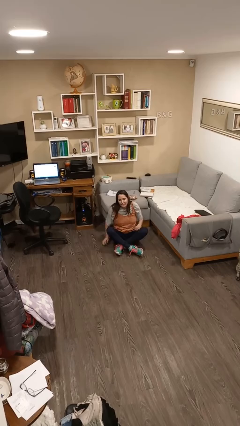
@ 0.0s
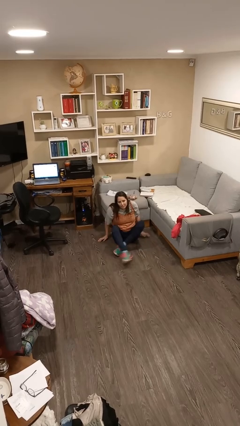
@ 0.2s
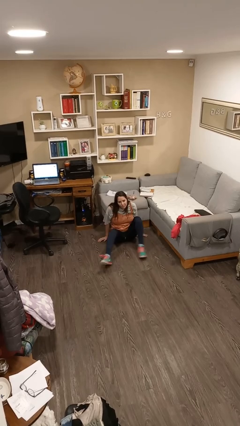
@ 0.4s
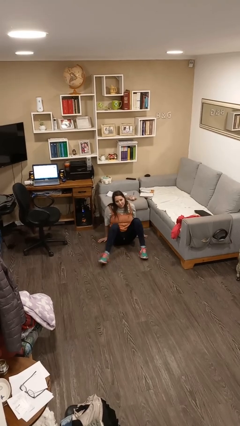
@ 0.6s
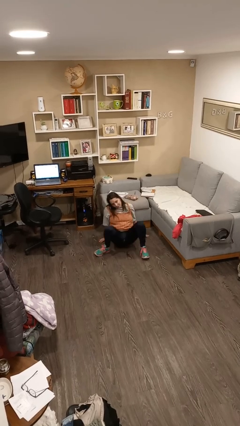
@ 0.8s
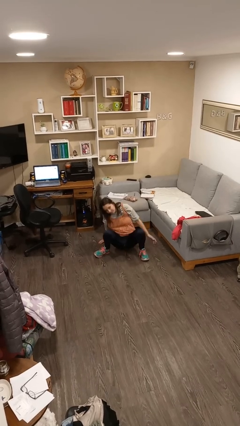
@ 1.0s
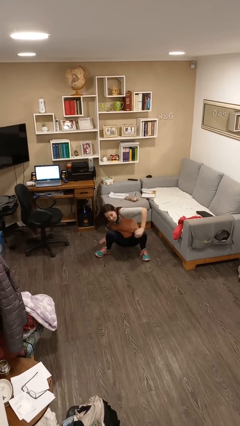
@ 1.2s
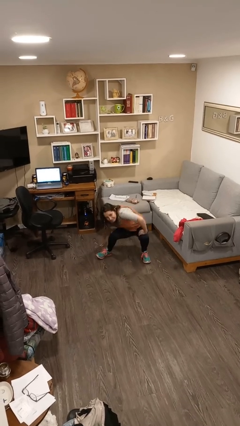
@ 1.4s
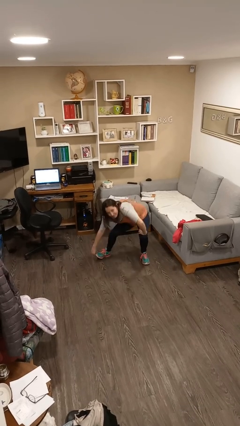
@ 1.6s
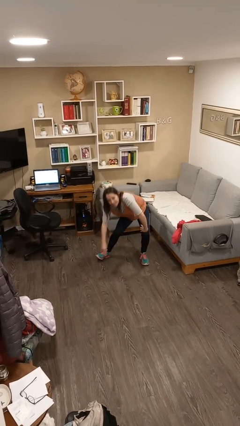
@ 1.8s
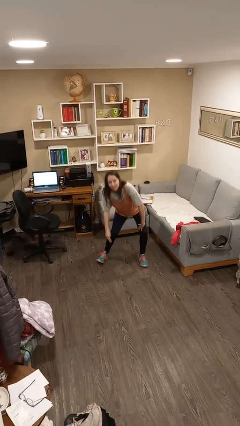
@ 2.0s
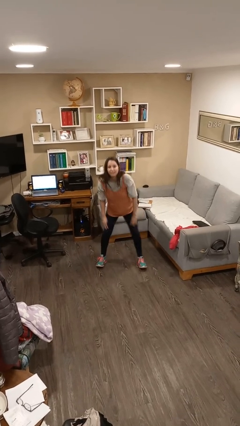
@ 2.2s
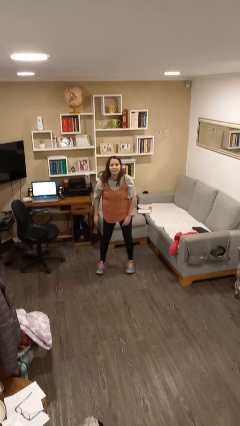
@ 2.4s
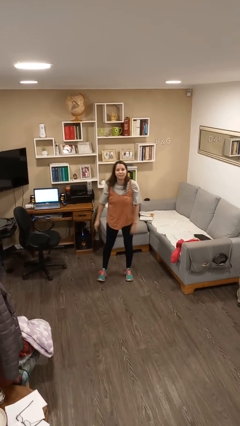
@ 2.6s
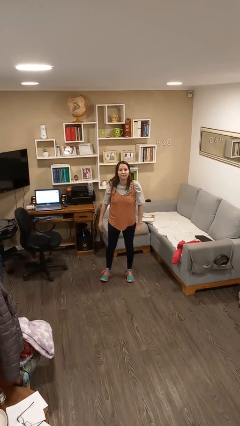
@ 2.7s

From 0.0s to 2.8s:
person stands up from floor

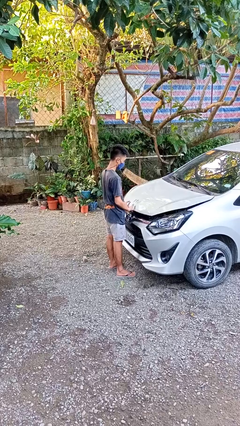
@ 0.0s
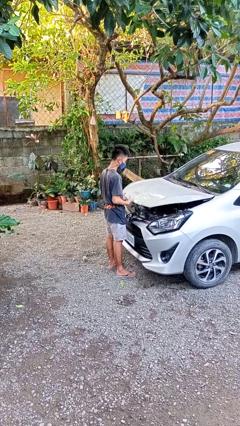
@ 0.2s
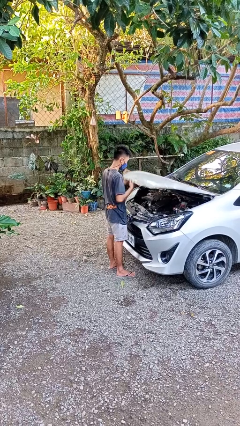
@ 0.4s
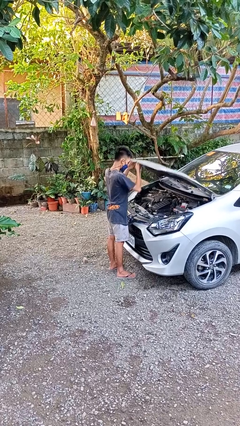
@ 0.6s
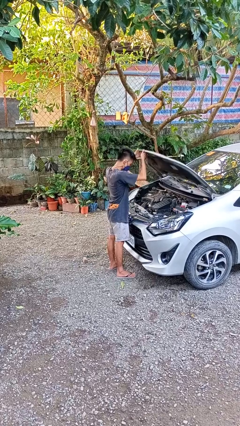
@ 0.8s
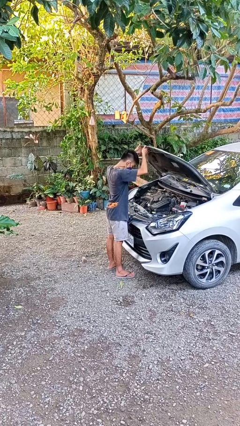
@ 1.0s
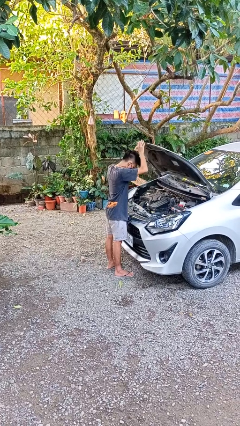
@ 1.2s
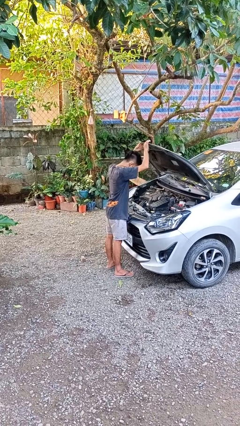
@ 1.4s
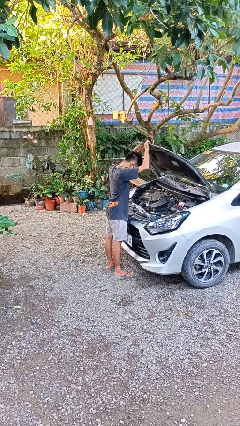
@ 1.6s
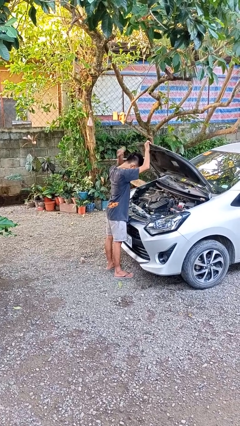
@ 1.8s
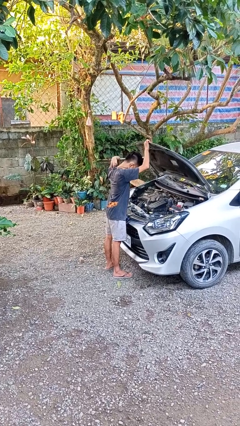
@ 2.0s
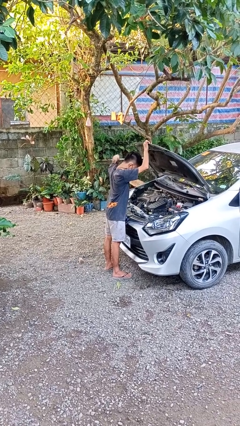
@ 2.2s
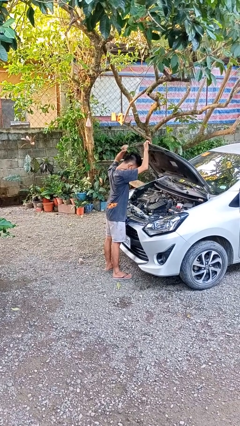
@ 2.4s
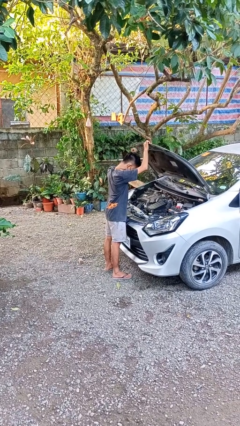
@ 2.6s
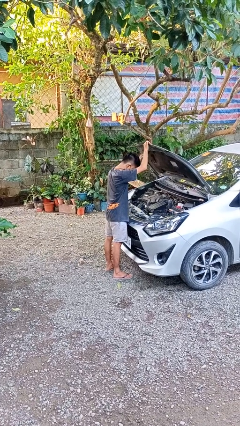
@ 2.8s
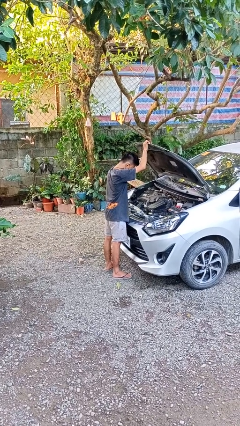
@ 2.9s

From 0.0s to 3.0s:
person opens car hood

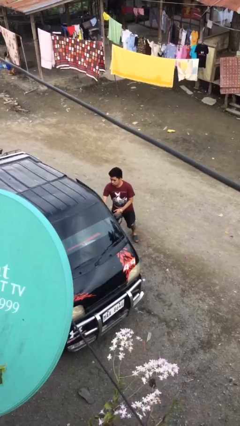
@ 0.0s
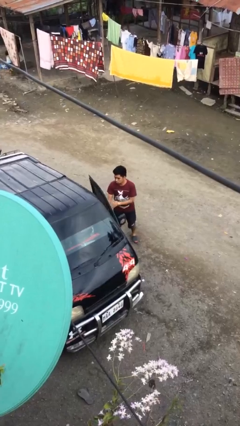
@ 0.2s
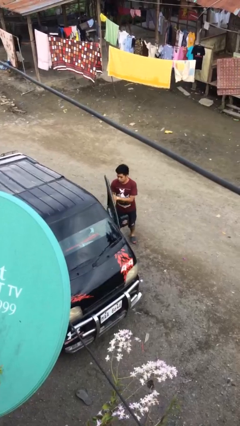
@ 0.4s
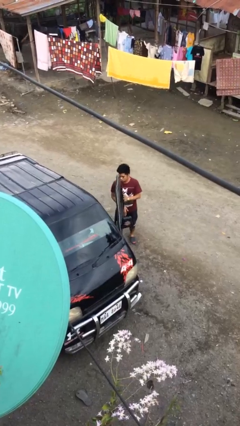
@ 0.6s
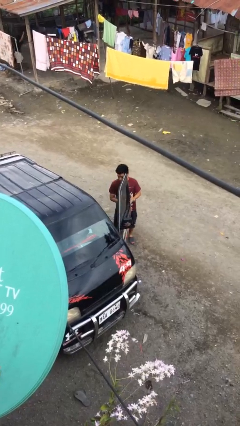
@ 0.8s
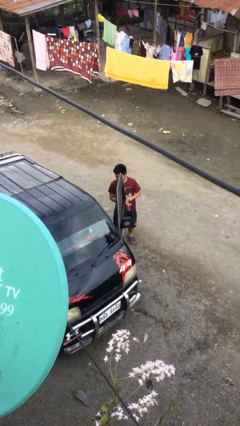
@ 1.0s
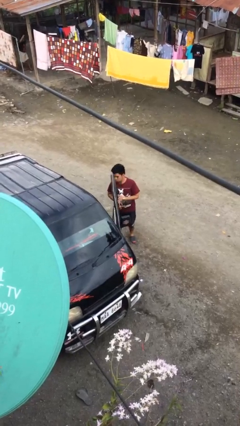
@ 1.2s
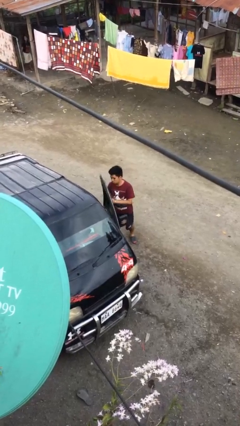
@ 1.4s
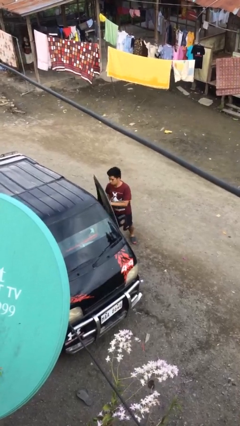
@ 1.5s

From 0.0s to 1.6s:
person opens car door

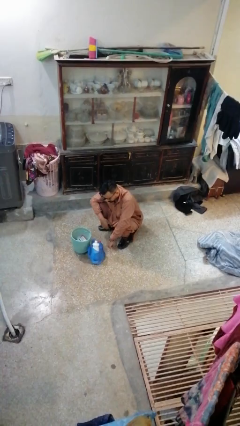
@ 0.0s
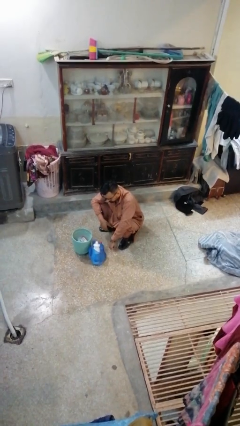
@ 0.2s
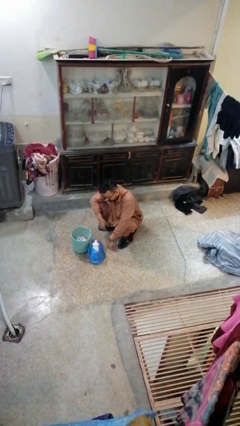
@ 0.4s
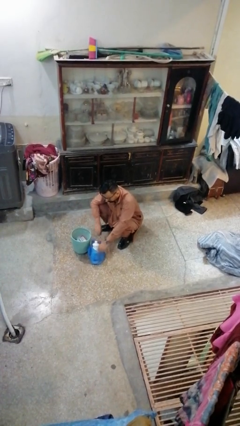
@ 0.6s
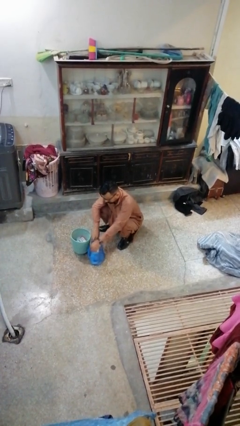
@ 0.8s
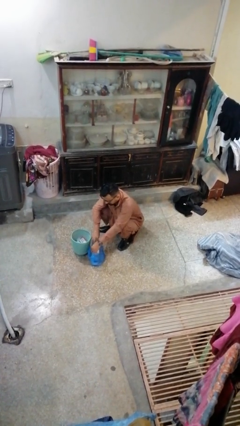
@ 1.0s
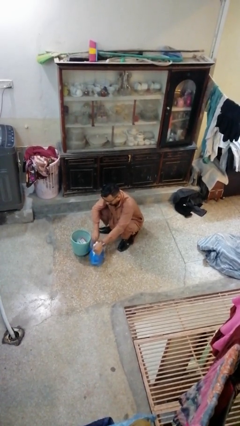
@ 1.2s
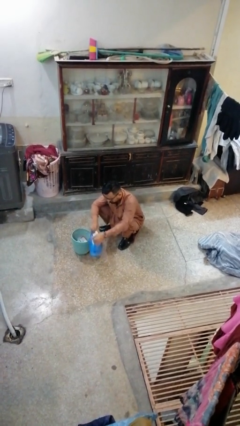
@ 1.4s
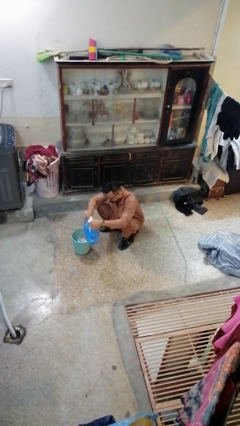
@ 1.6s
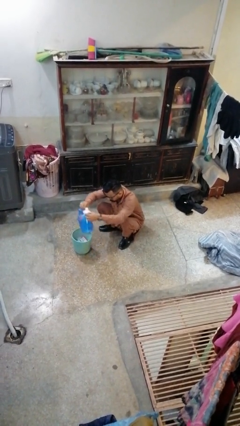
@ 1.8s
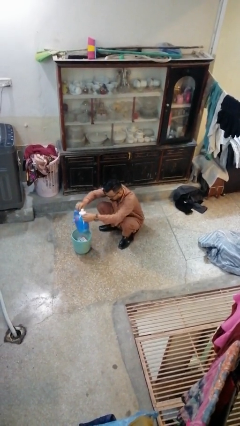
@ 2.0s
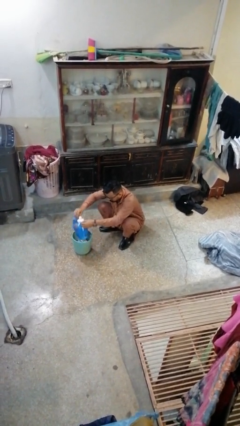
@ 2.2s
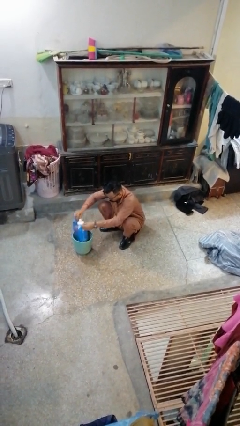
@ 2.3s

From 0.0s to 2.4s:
person inserts trashbag into trashcan

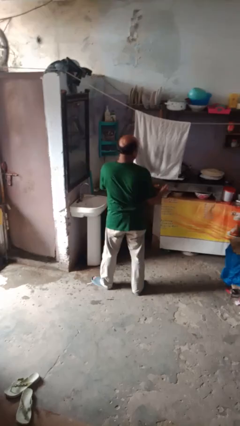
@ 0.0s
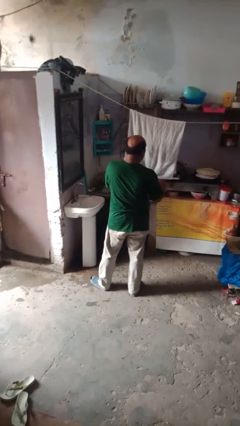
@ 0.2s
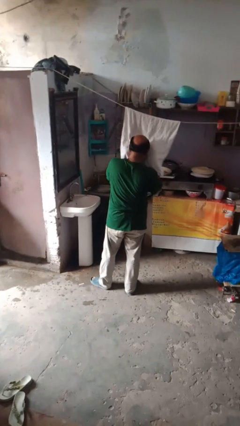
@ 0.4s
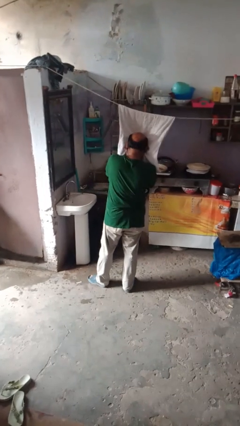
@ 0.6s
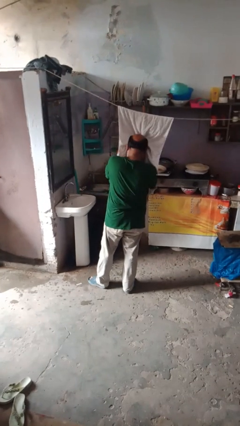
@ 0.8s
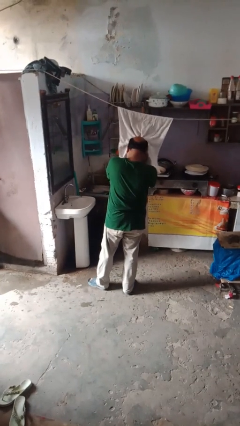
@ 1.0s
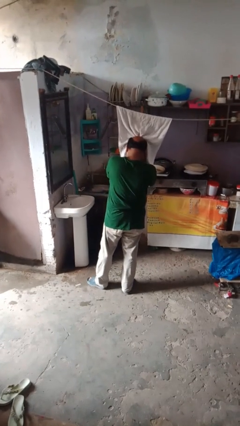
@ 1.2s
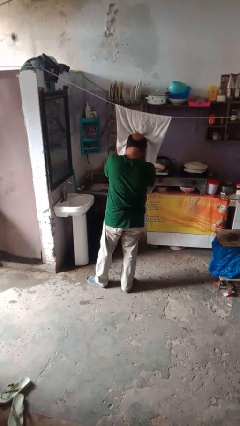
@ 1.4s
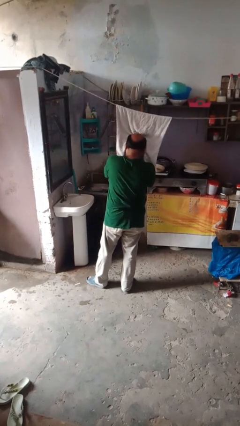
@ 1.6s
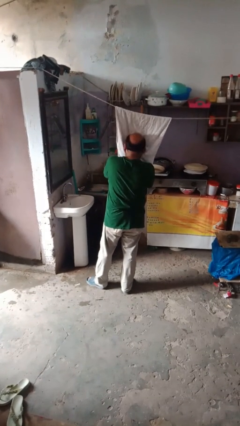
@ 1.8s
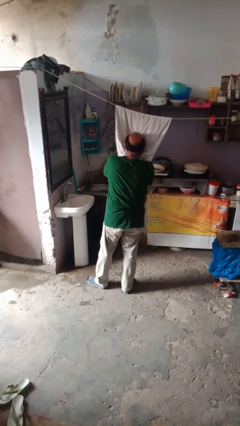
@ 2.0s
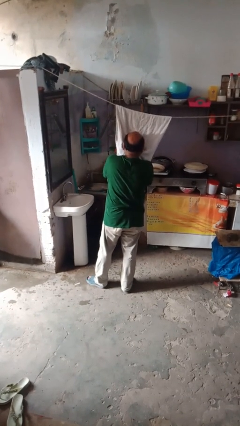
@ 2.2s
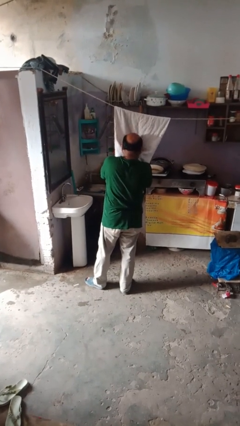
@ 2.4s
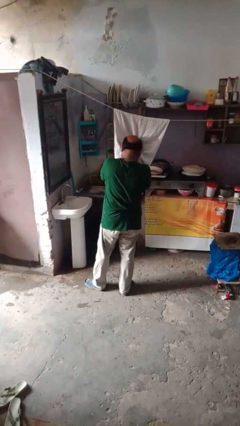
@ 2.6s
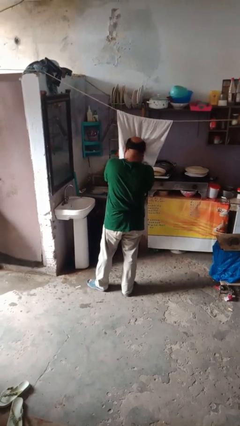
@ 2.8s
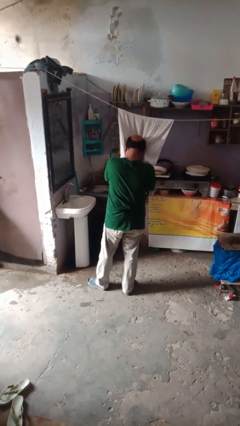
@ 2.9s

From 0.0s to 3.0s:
person dries face with towel

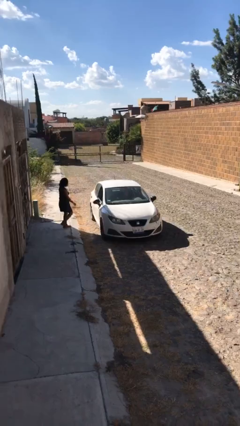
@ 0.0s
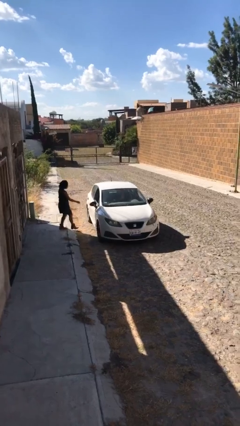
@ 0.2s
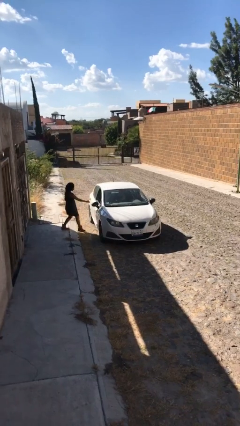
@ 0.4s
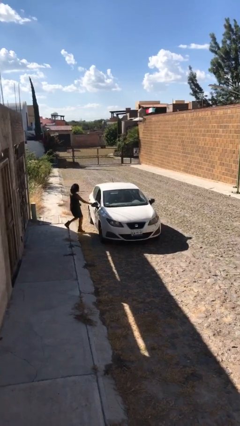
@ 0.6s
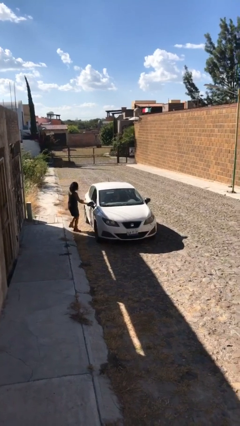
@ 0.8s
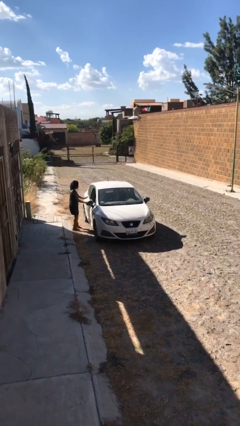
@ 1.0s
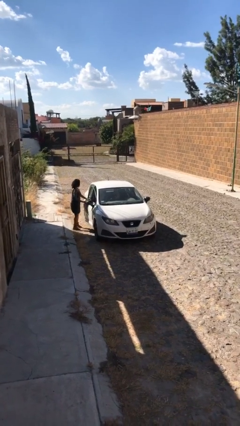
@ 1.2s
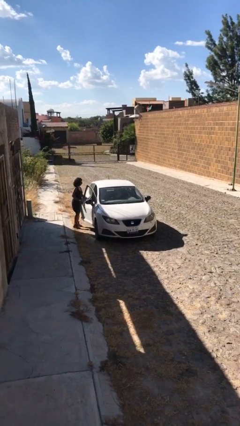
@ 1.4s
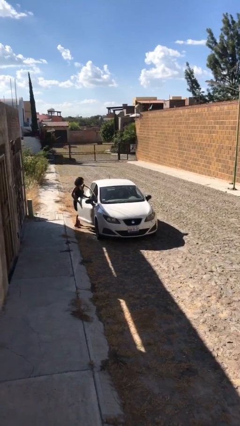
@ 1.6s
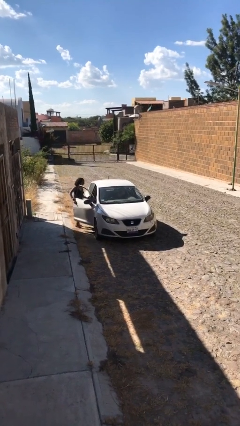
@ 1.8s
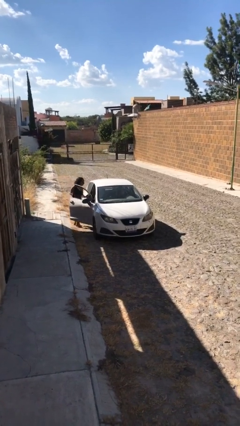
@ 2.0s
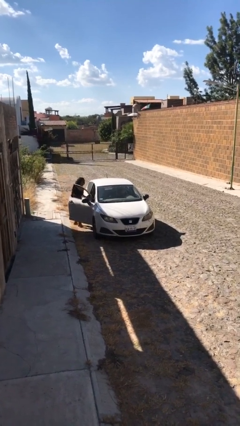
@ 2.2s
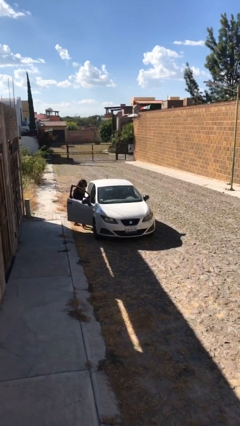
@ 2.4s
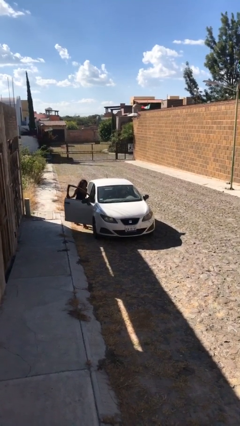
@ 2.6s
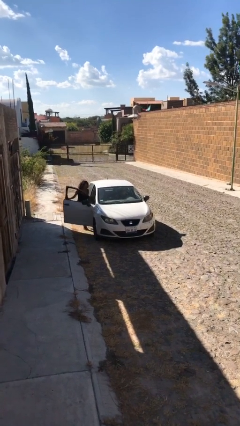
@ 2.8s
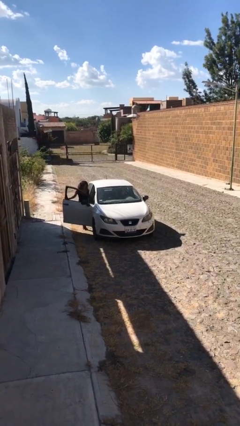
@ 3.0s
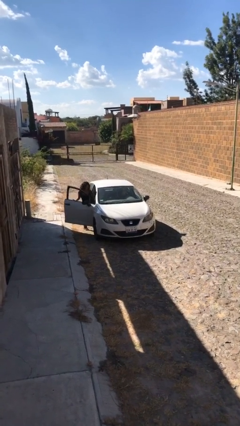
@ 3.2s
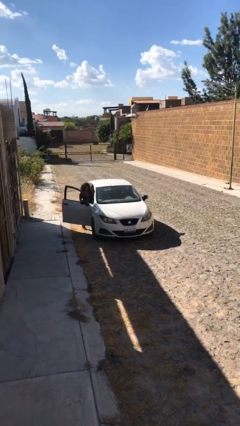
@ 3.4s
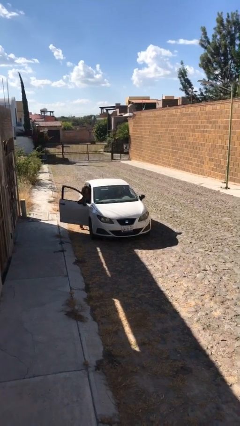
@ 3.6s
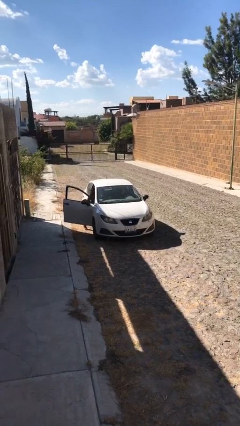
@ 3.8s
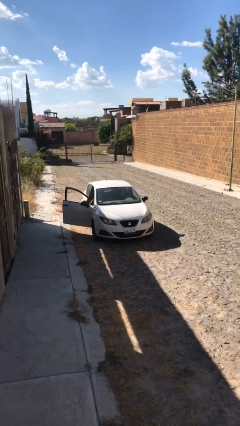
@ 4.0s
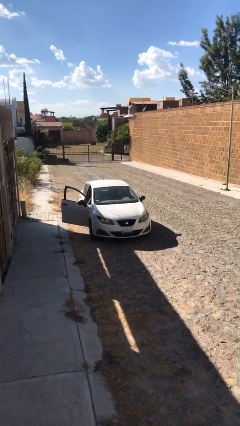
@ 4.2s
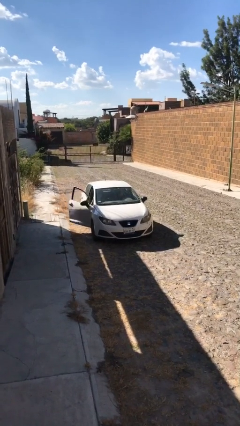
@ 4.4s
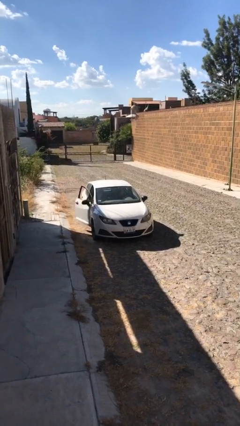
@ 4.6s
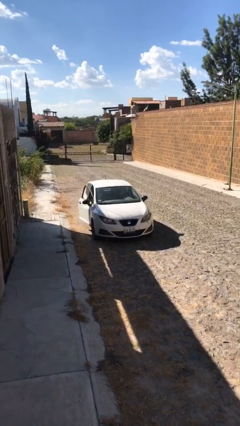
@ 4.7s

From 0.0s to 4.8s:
car picks up person
